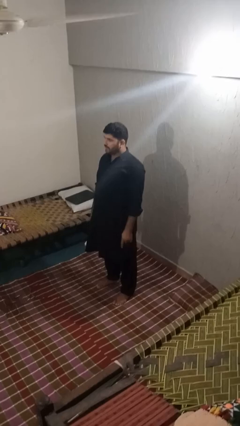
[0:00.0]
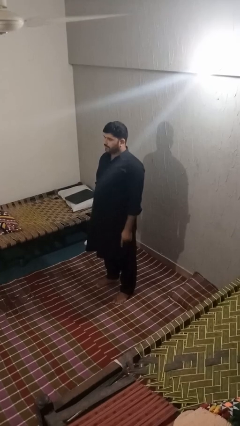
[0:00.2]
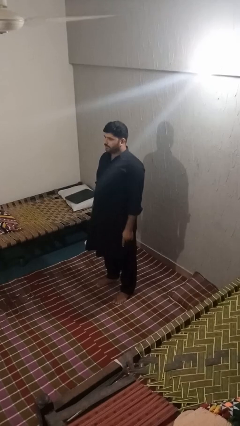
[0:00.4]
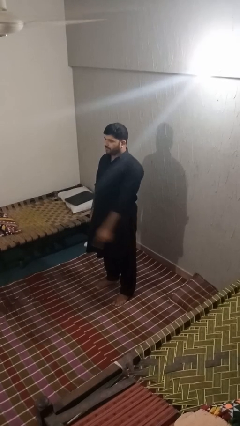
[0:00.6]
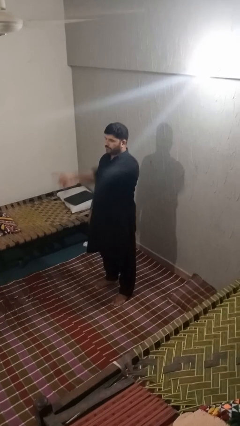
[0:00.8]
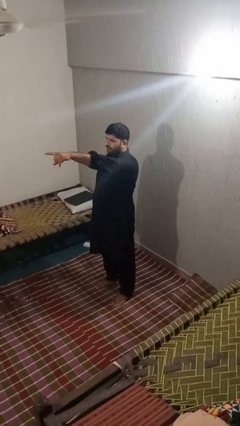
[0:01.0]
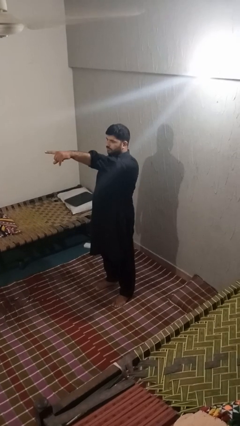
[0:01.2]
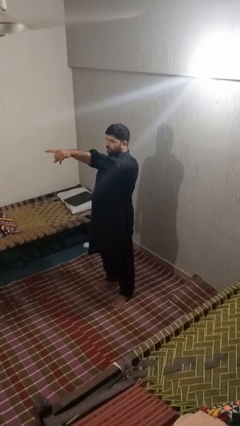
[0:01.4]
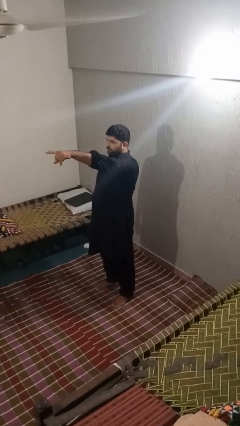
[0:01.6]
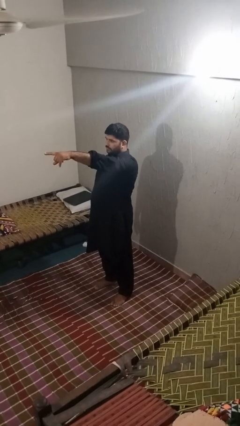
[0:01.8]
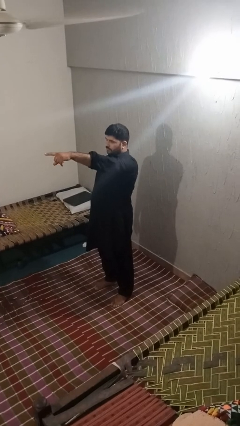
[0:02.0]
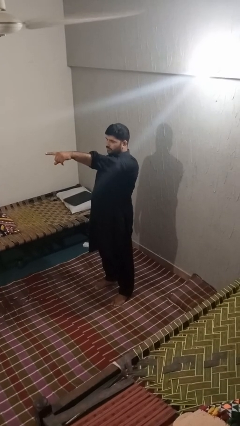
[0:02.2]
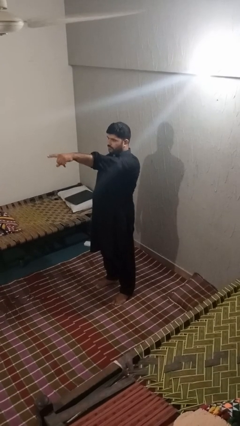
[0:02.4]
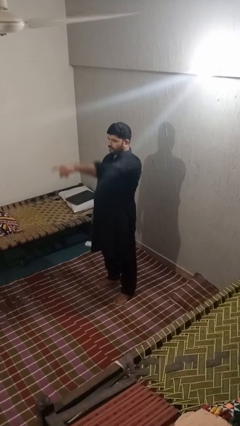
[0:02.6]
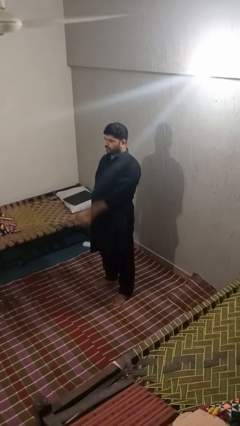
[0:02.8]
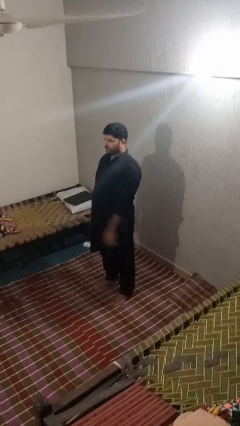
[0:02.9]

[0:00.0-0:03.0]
person points at person

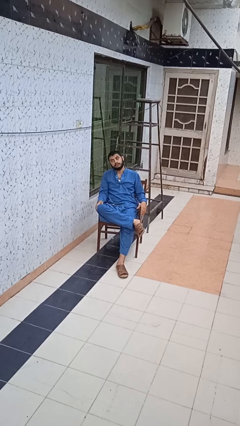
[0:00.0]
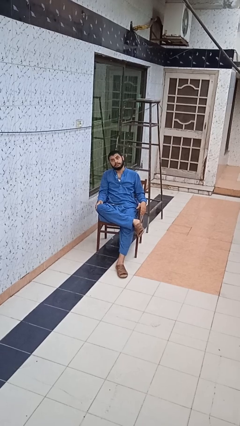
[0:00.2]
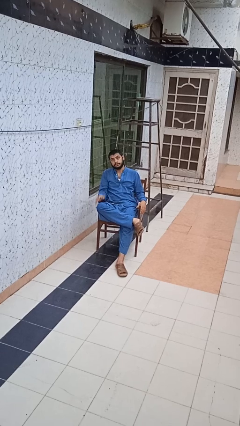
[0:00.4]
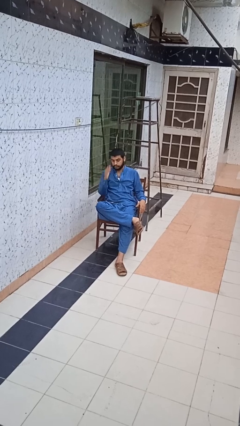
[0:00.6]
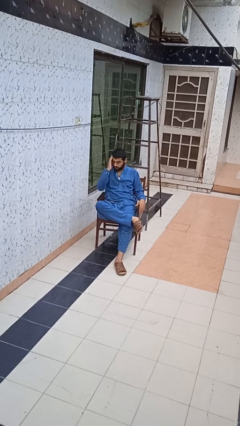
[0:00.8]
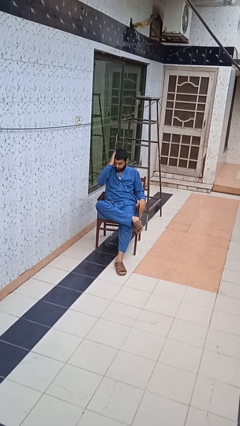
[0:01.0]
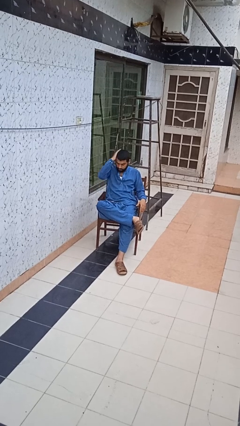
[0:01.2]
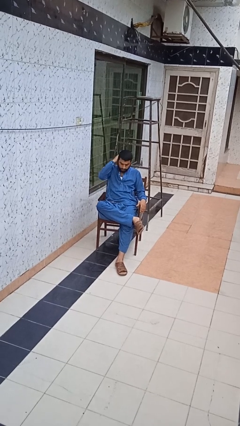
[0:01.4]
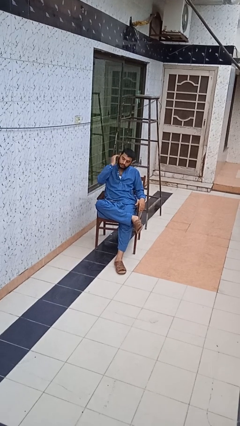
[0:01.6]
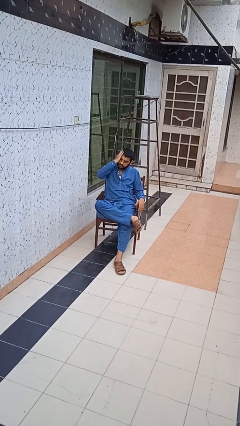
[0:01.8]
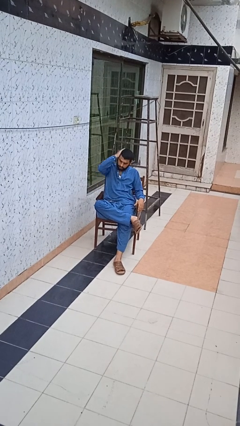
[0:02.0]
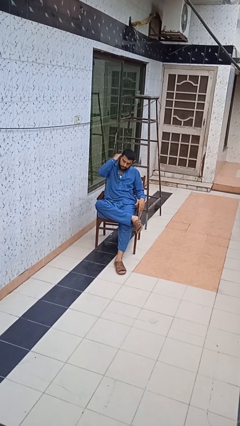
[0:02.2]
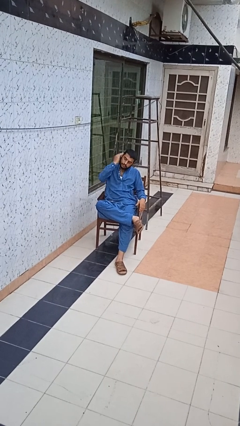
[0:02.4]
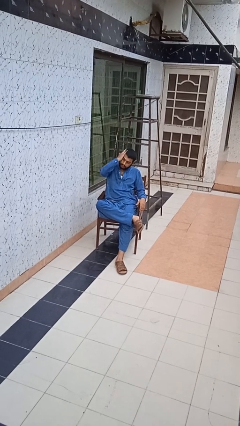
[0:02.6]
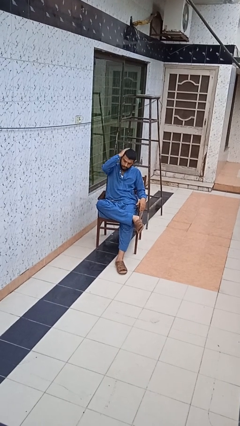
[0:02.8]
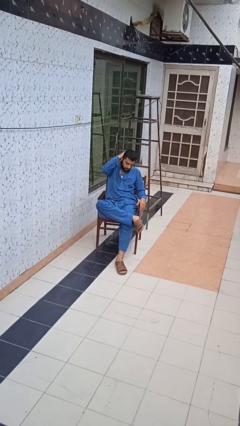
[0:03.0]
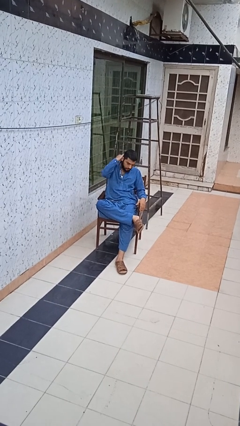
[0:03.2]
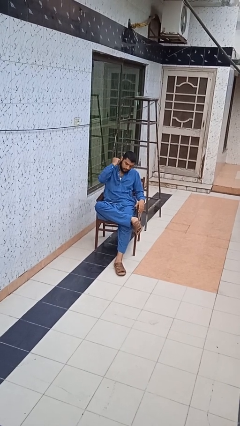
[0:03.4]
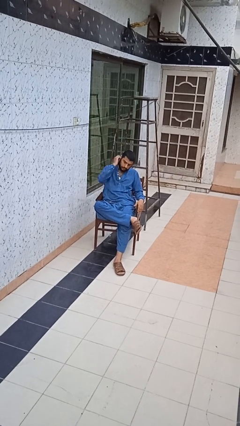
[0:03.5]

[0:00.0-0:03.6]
person strokes hair

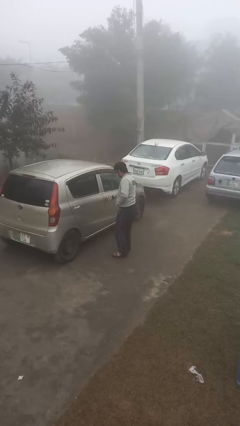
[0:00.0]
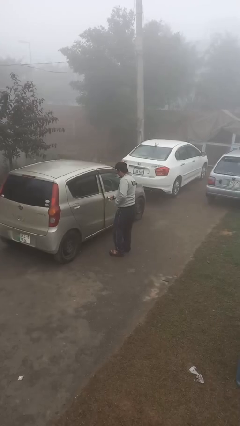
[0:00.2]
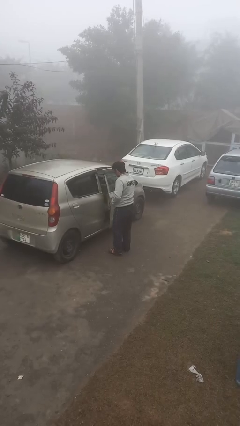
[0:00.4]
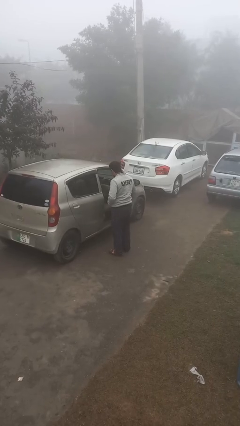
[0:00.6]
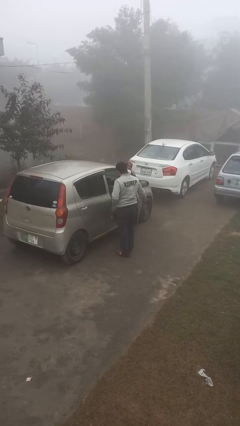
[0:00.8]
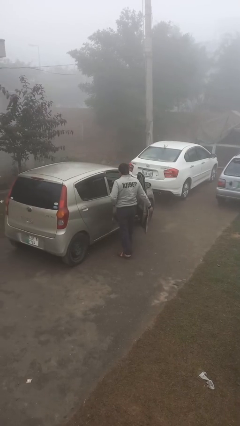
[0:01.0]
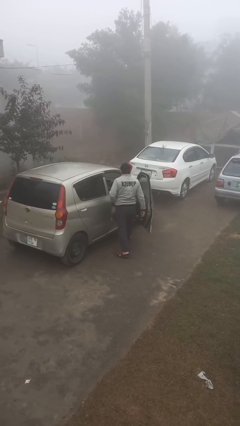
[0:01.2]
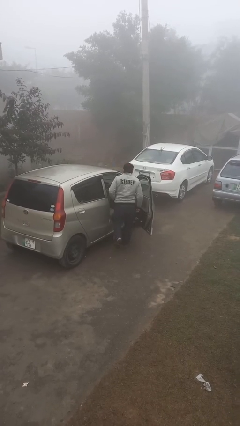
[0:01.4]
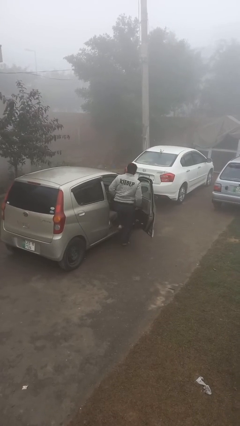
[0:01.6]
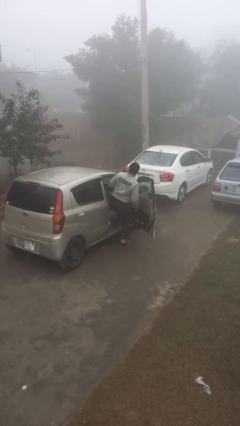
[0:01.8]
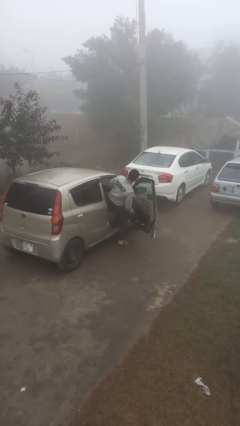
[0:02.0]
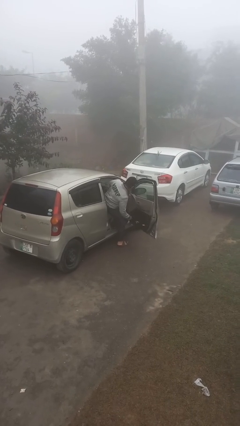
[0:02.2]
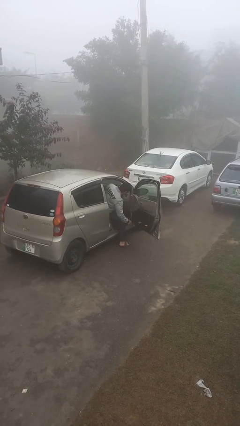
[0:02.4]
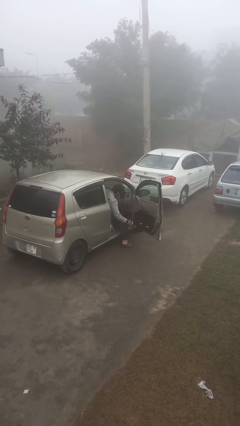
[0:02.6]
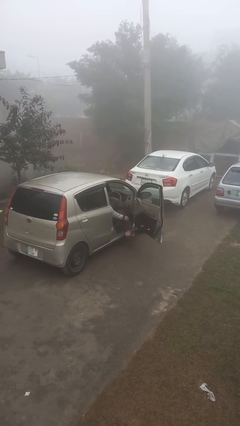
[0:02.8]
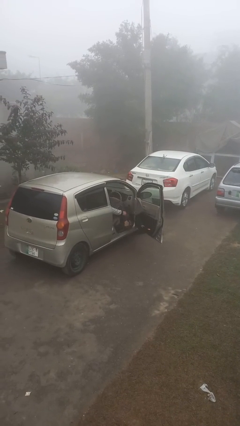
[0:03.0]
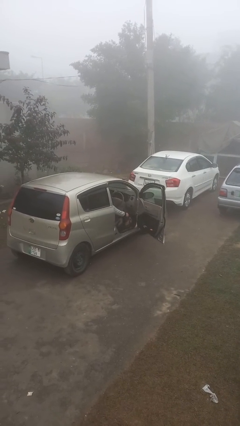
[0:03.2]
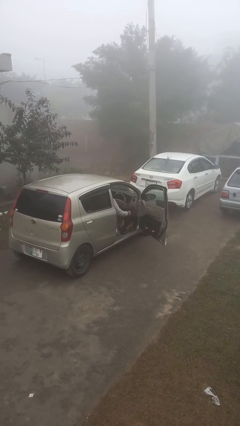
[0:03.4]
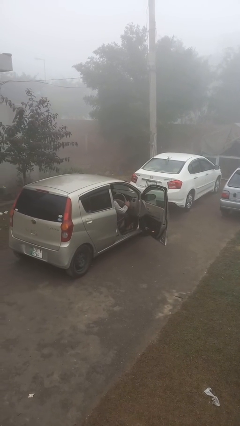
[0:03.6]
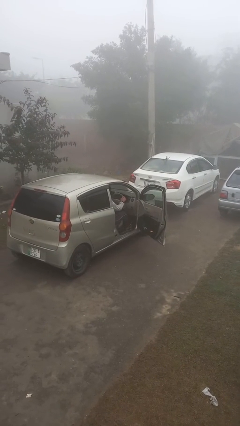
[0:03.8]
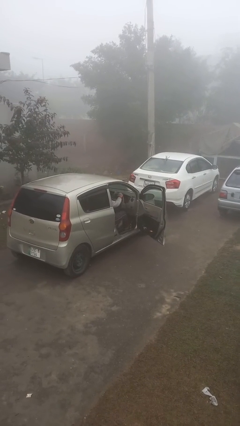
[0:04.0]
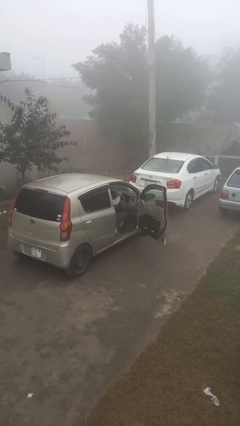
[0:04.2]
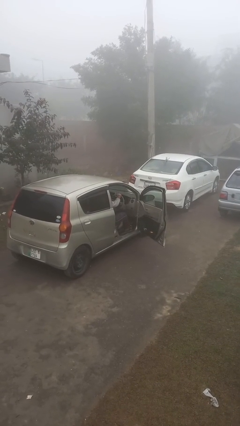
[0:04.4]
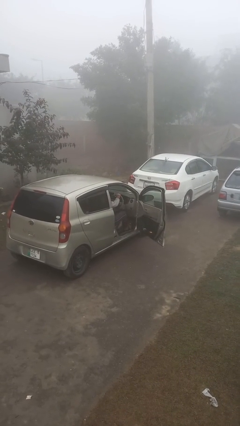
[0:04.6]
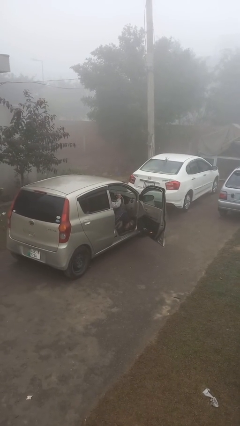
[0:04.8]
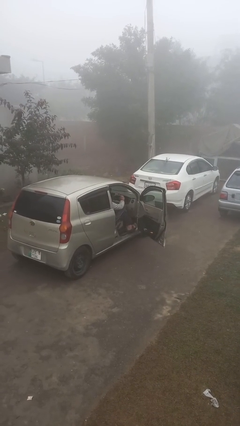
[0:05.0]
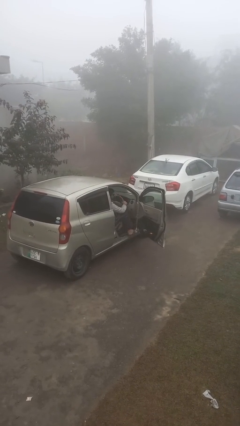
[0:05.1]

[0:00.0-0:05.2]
person enters car

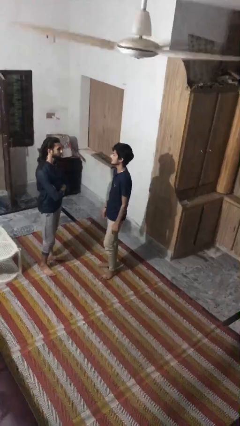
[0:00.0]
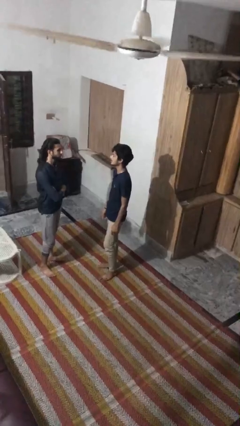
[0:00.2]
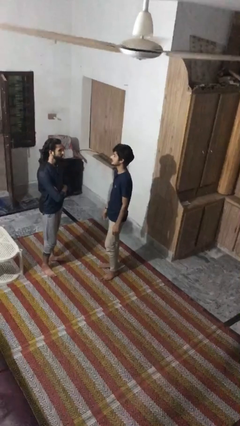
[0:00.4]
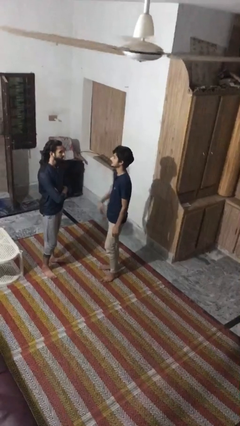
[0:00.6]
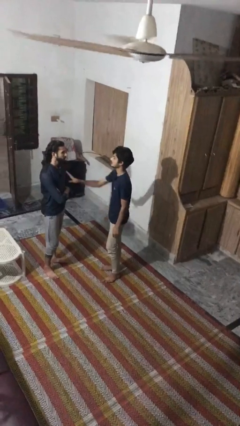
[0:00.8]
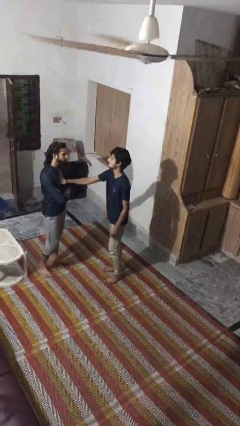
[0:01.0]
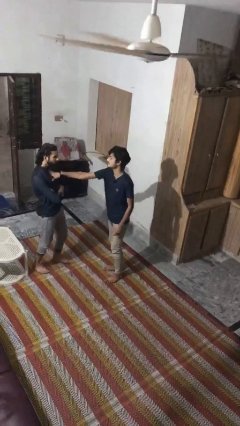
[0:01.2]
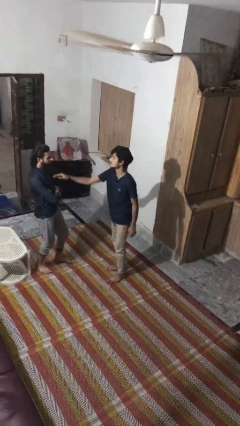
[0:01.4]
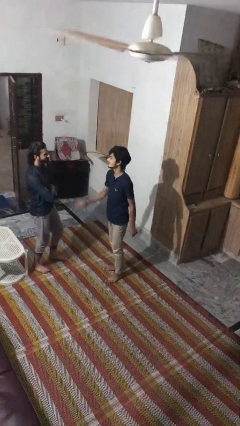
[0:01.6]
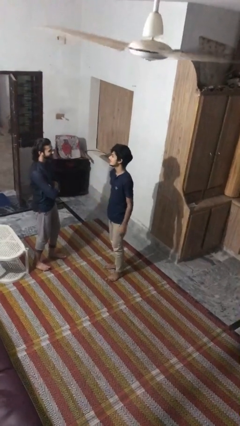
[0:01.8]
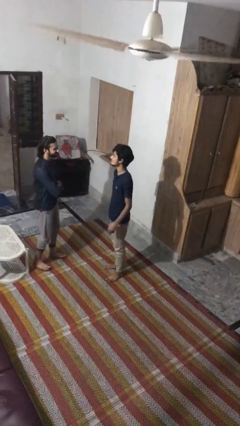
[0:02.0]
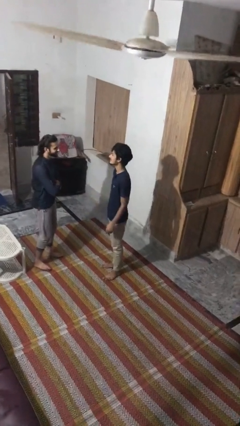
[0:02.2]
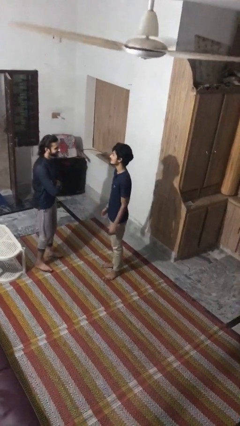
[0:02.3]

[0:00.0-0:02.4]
person shoves person

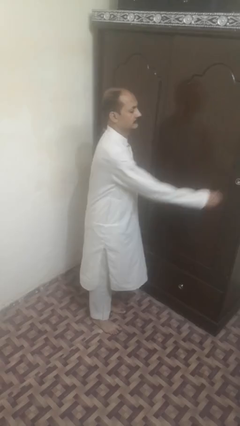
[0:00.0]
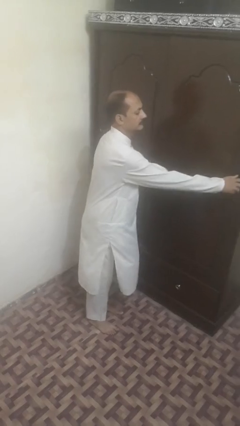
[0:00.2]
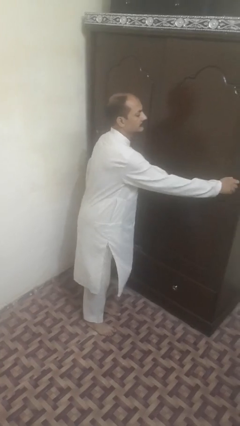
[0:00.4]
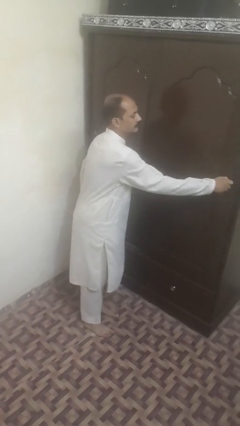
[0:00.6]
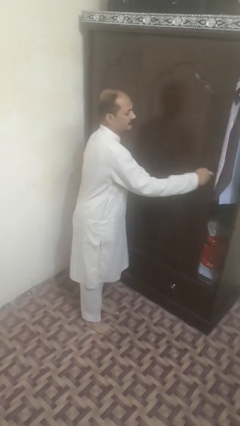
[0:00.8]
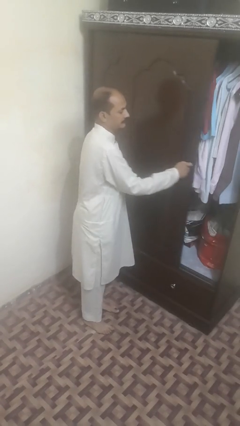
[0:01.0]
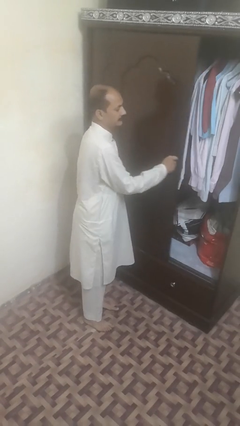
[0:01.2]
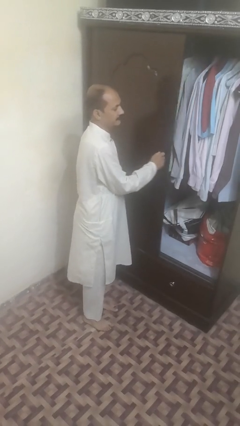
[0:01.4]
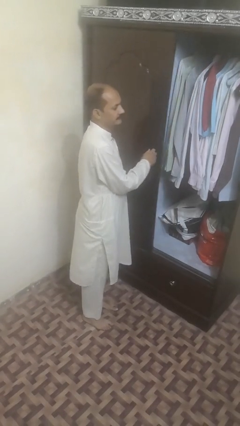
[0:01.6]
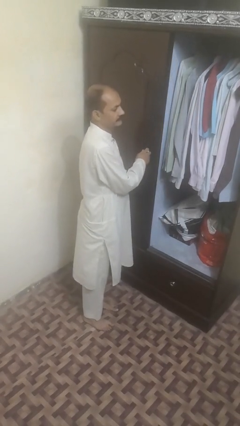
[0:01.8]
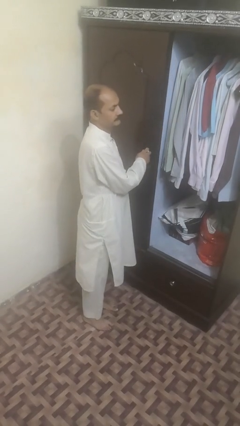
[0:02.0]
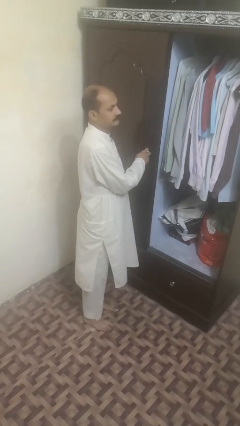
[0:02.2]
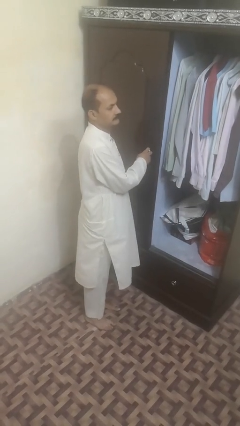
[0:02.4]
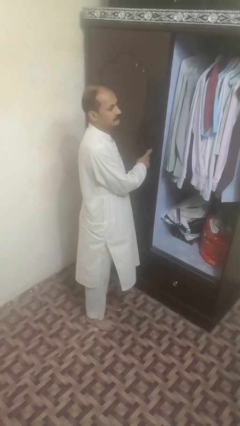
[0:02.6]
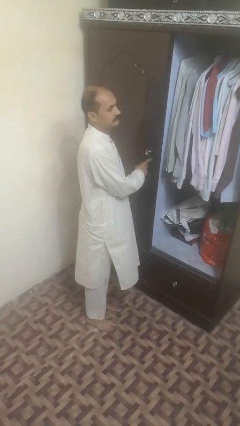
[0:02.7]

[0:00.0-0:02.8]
person opens sliding door
